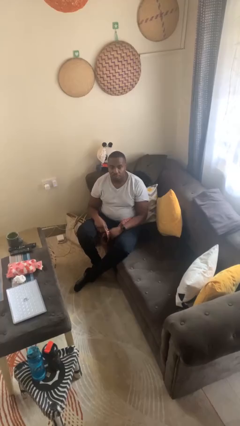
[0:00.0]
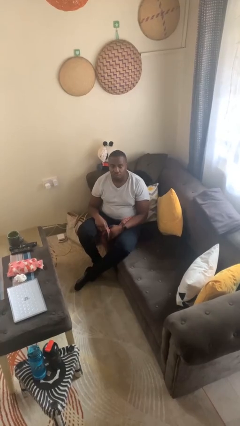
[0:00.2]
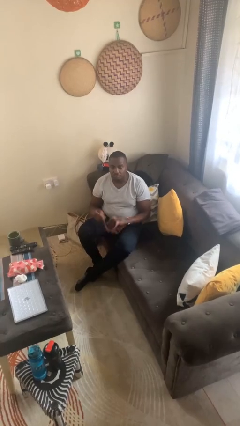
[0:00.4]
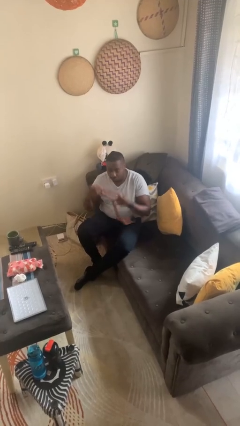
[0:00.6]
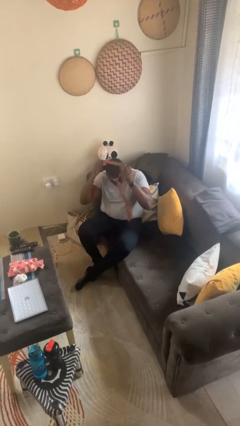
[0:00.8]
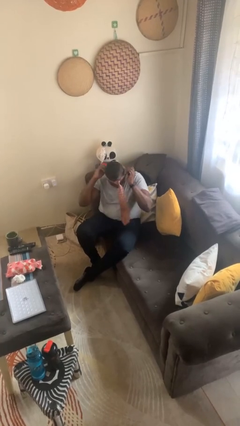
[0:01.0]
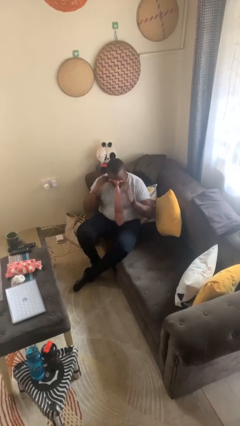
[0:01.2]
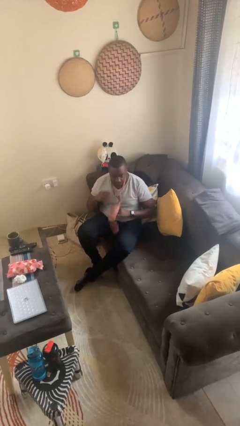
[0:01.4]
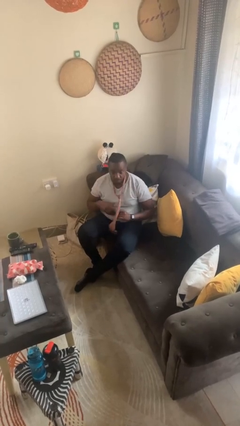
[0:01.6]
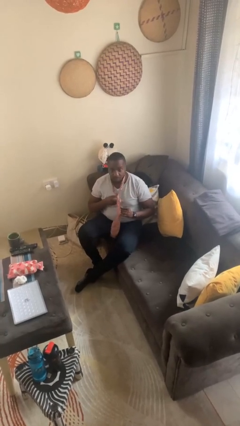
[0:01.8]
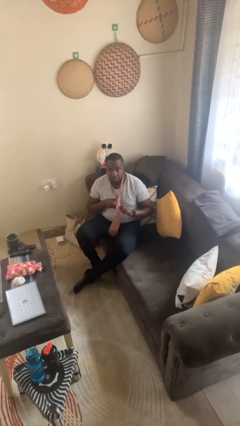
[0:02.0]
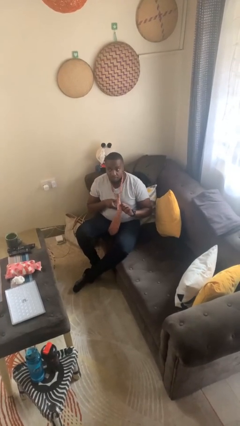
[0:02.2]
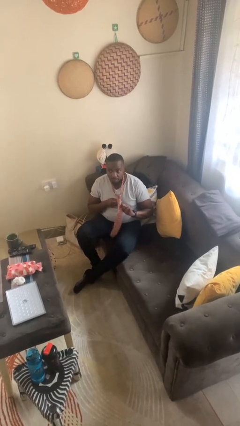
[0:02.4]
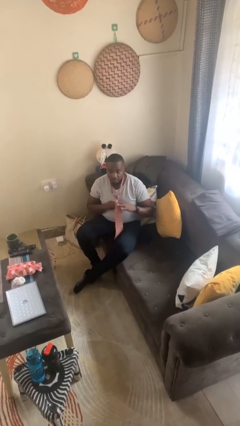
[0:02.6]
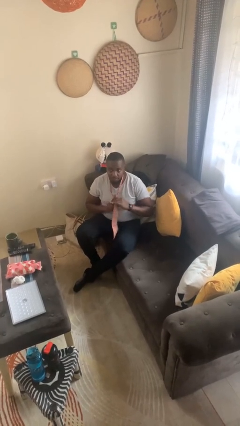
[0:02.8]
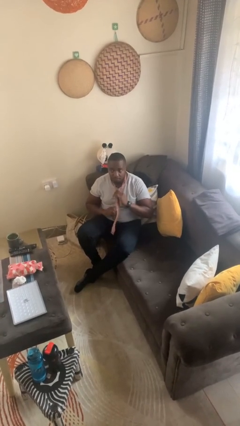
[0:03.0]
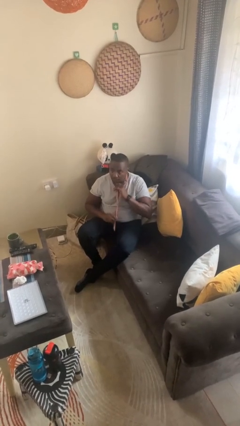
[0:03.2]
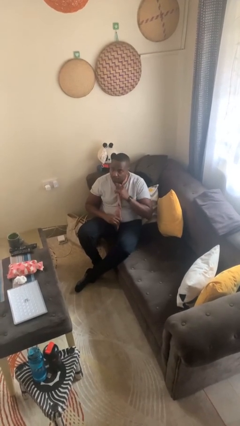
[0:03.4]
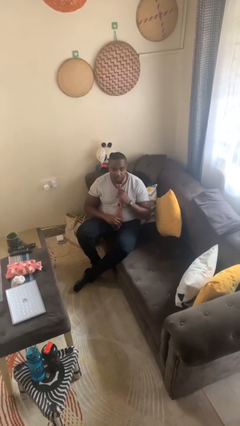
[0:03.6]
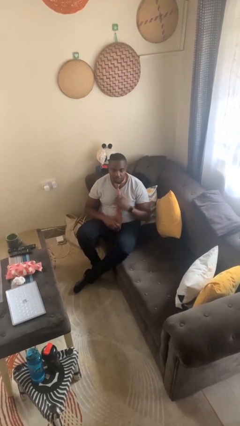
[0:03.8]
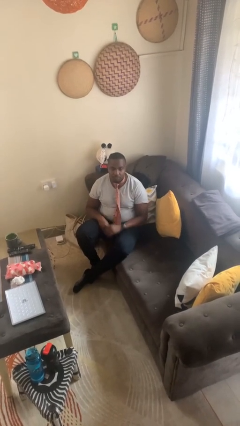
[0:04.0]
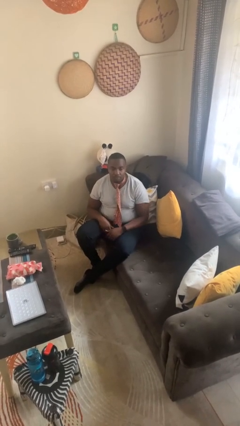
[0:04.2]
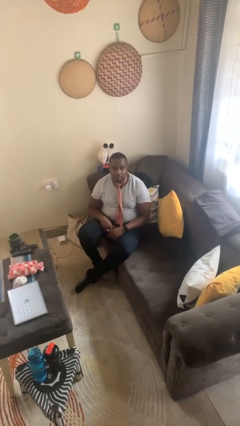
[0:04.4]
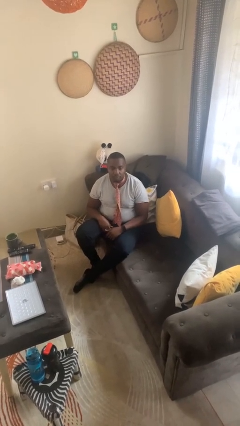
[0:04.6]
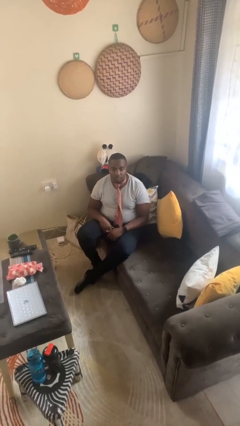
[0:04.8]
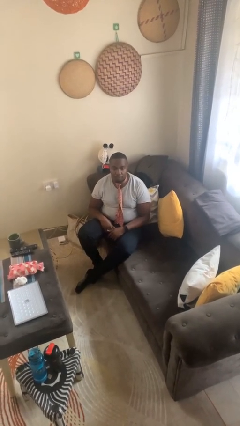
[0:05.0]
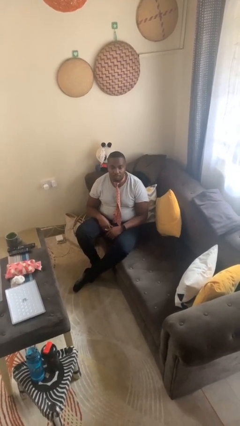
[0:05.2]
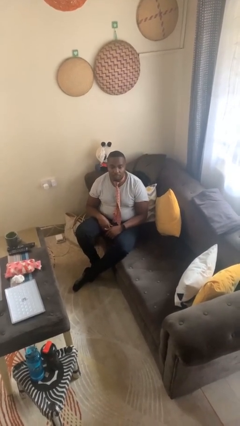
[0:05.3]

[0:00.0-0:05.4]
person puts on necktie

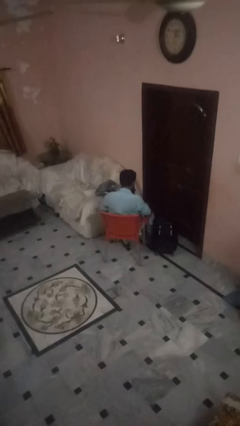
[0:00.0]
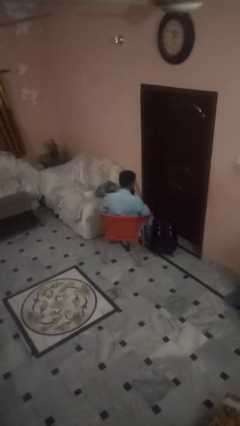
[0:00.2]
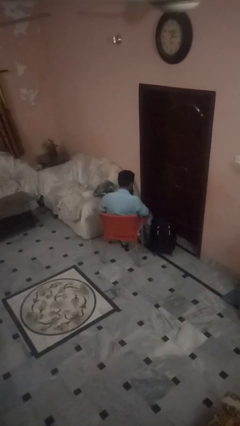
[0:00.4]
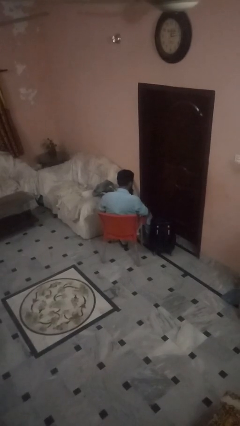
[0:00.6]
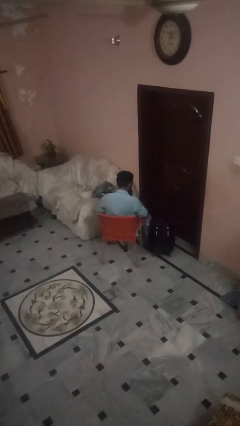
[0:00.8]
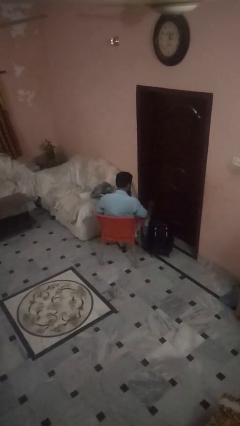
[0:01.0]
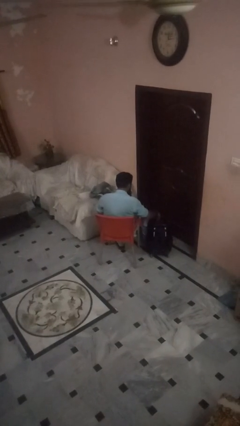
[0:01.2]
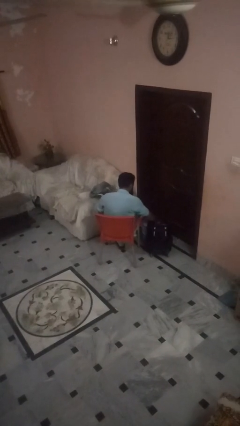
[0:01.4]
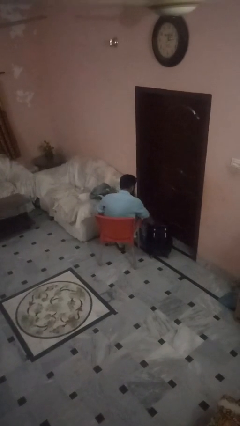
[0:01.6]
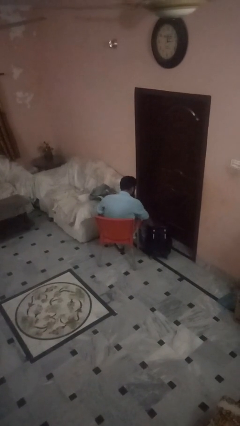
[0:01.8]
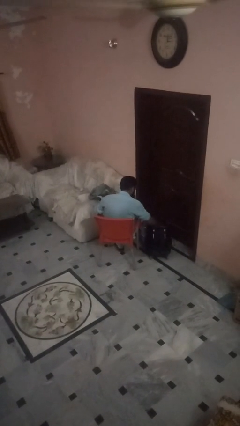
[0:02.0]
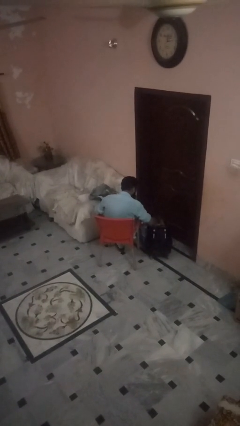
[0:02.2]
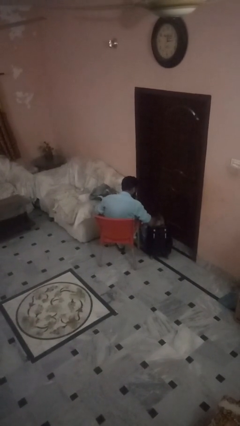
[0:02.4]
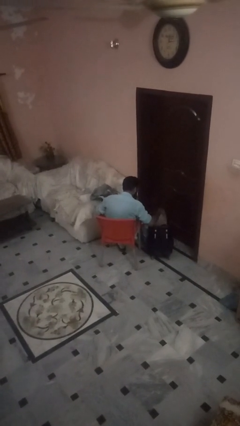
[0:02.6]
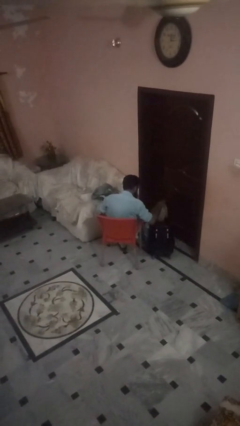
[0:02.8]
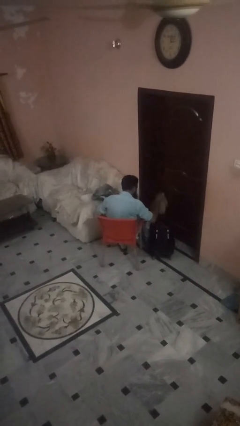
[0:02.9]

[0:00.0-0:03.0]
person unloads clothes from suitcase

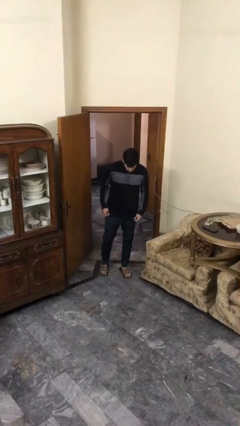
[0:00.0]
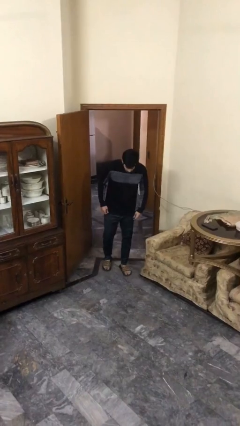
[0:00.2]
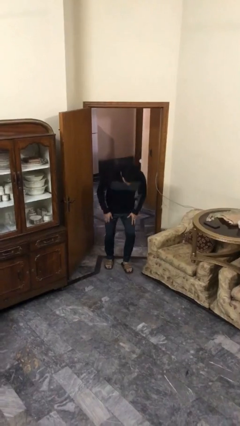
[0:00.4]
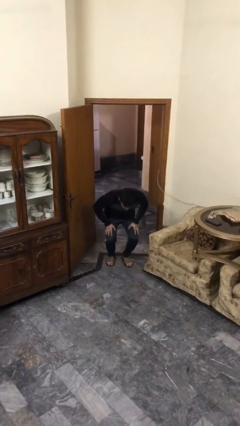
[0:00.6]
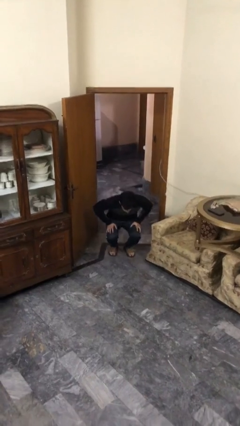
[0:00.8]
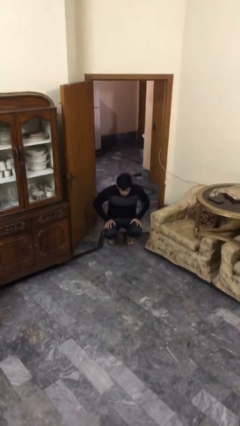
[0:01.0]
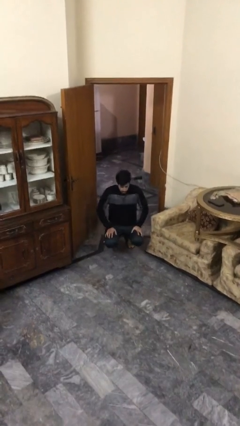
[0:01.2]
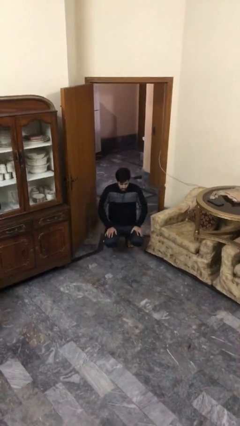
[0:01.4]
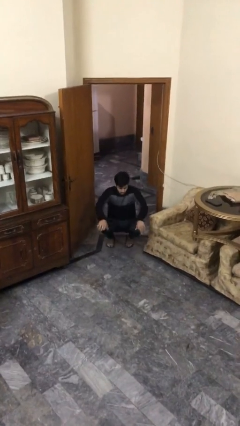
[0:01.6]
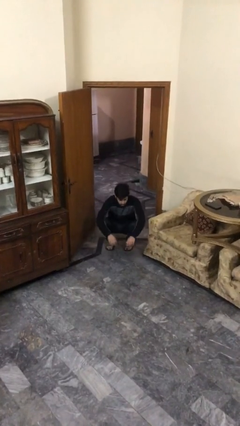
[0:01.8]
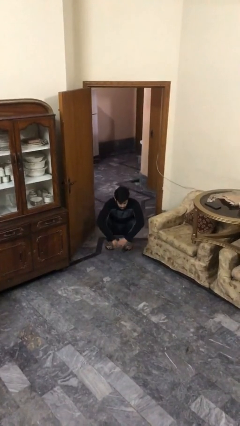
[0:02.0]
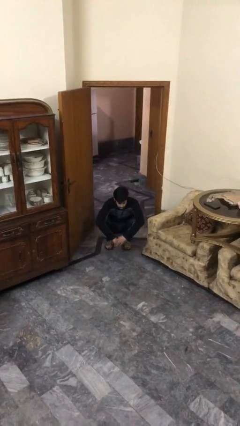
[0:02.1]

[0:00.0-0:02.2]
person sits down

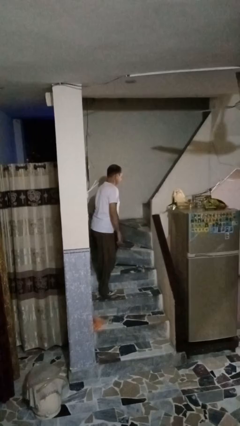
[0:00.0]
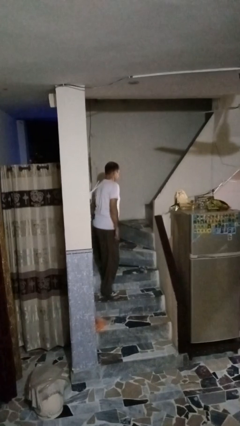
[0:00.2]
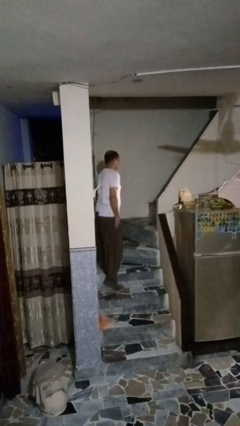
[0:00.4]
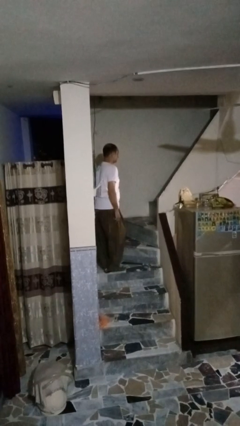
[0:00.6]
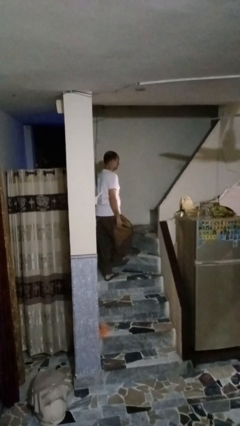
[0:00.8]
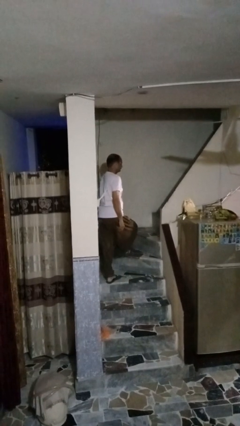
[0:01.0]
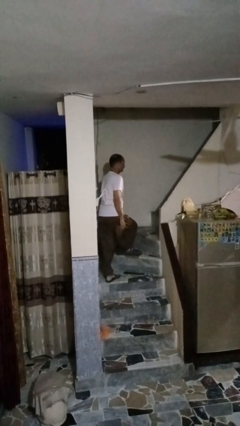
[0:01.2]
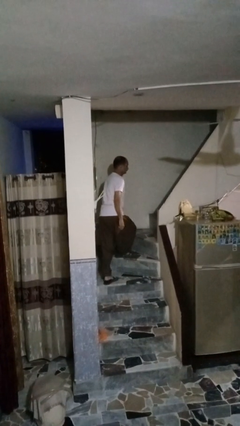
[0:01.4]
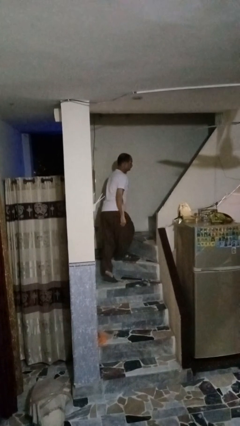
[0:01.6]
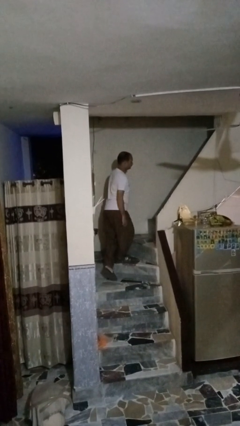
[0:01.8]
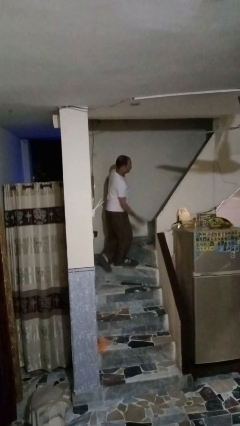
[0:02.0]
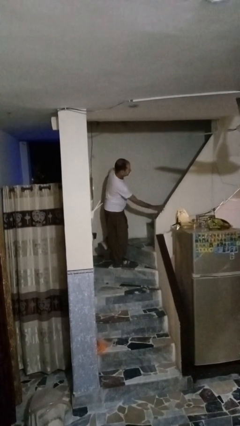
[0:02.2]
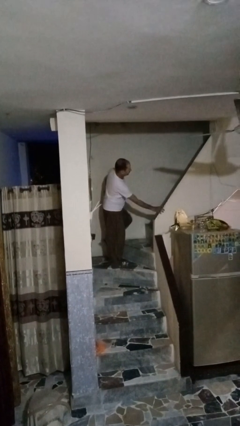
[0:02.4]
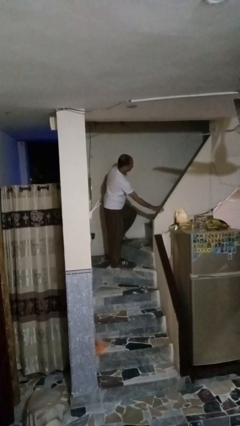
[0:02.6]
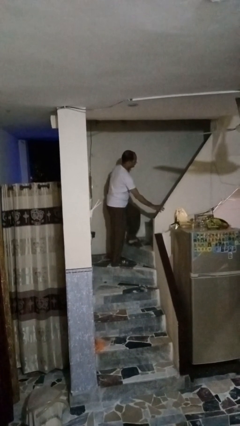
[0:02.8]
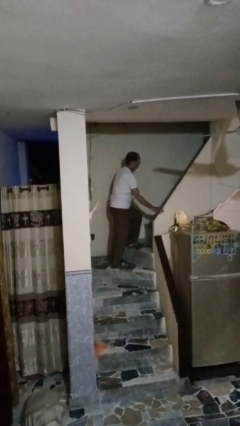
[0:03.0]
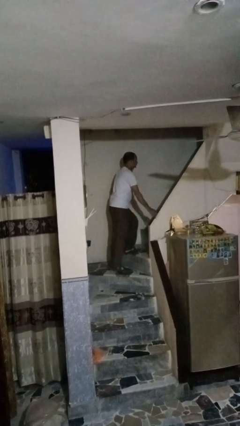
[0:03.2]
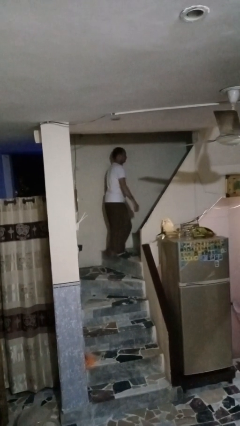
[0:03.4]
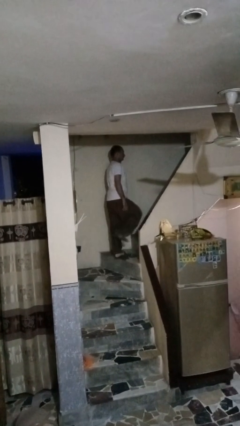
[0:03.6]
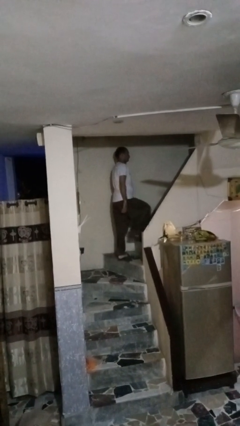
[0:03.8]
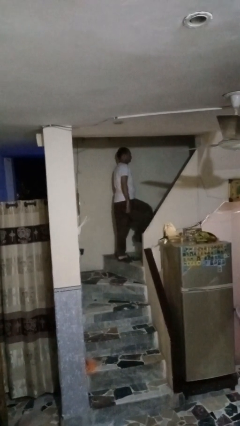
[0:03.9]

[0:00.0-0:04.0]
person climbs up stairs

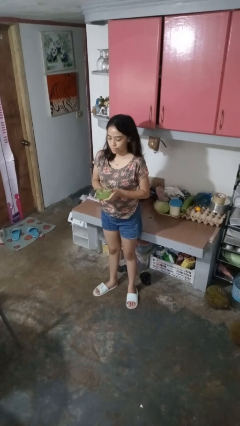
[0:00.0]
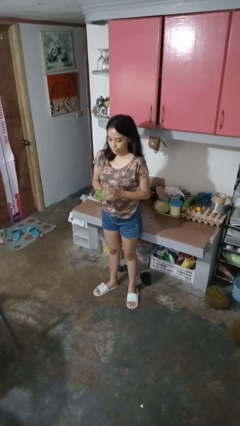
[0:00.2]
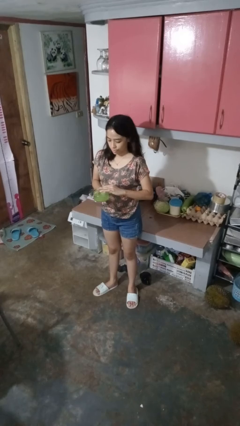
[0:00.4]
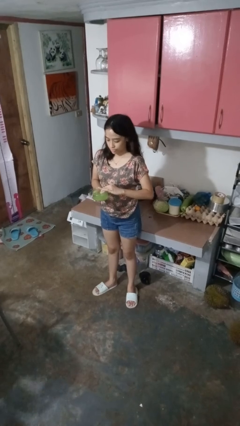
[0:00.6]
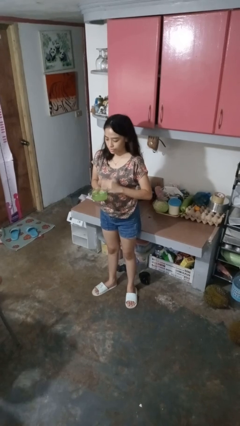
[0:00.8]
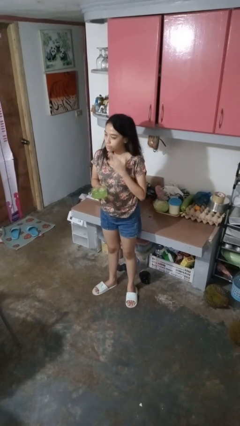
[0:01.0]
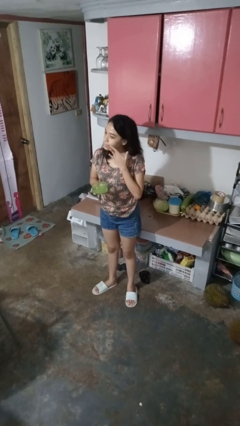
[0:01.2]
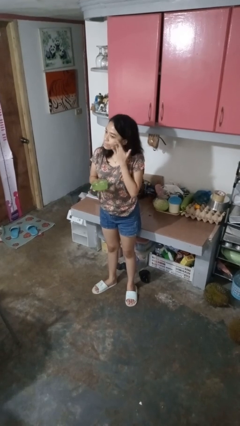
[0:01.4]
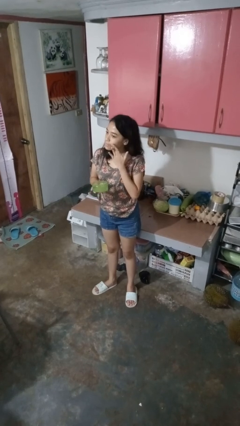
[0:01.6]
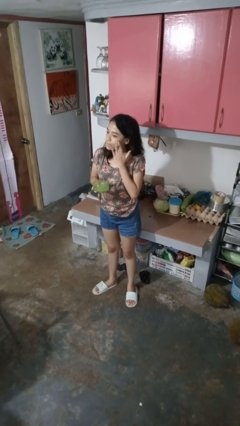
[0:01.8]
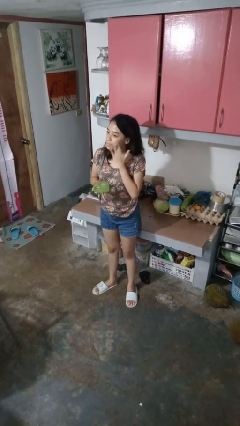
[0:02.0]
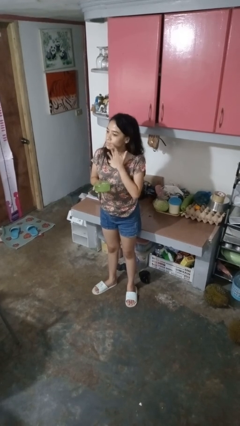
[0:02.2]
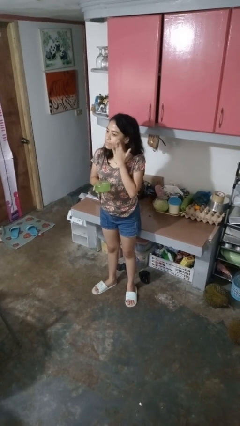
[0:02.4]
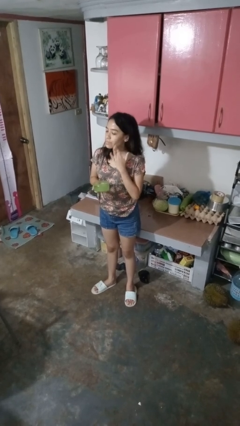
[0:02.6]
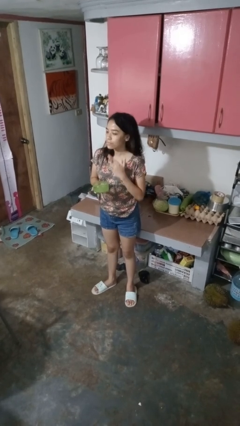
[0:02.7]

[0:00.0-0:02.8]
person applies facial moisturizer

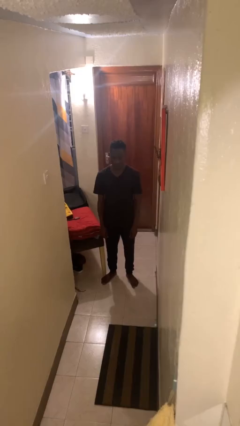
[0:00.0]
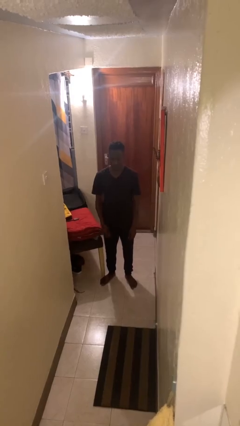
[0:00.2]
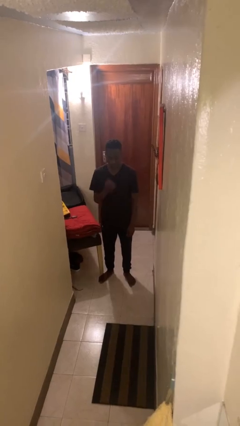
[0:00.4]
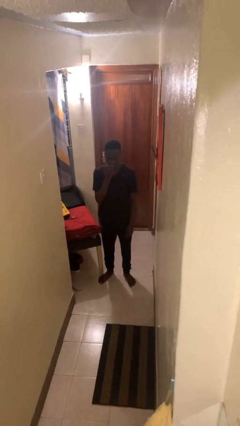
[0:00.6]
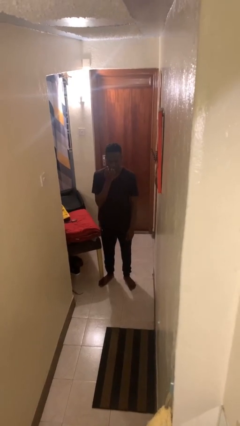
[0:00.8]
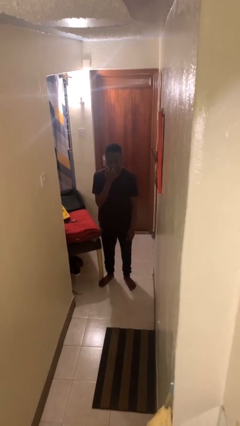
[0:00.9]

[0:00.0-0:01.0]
person licks fingers
